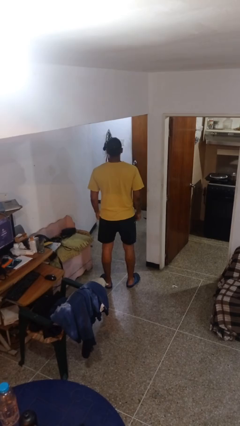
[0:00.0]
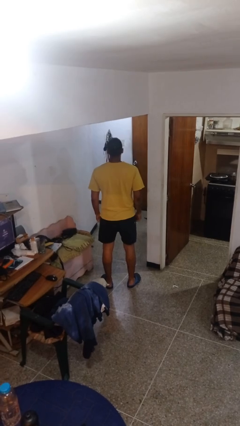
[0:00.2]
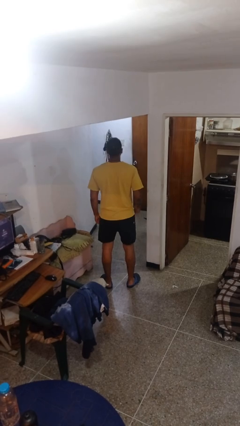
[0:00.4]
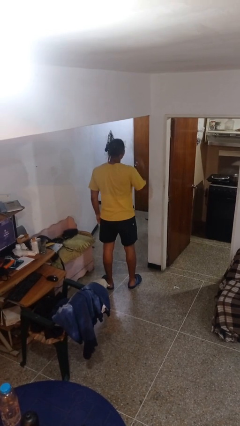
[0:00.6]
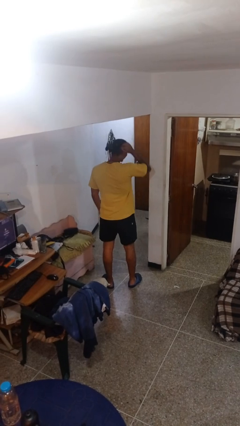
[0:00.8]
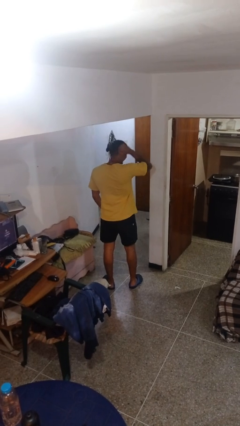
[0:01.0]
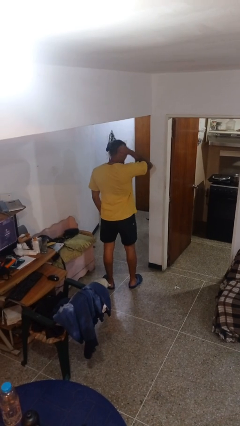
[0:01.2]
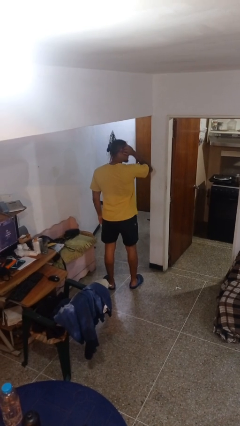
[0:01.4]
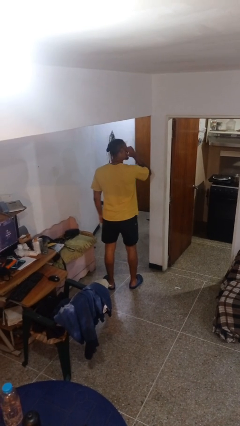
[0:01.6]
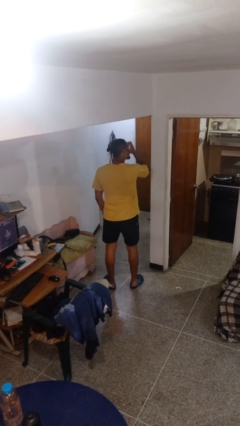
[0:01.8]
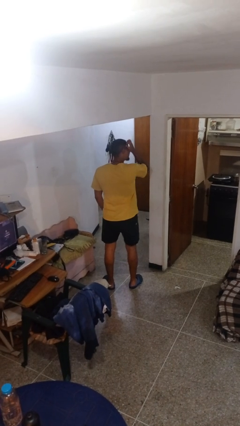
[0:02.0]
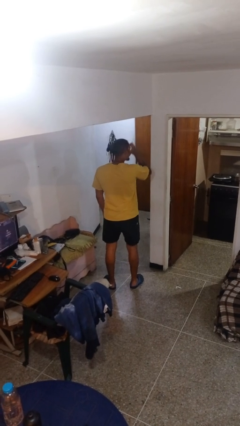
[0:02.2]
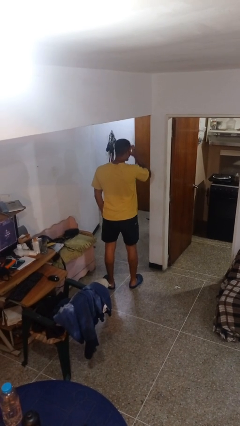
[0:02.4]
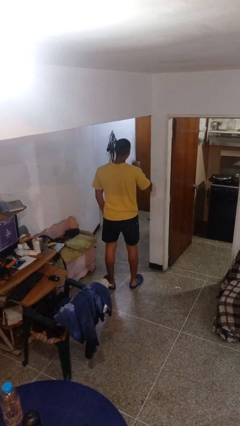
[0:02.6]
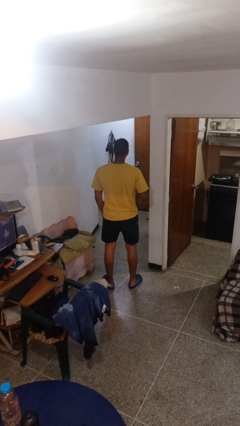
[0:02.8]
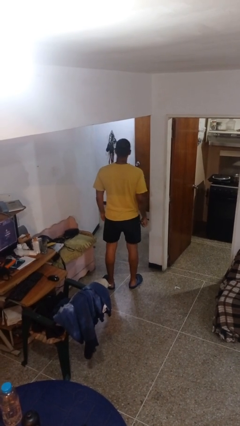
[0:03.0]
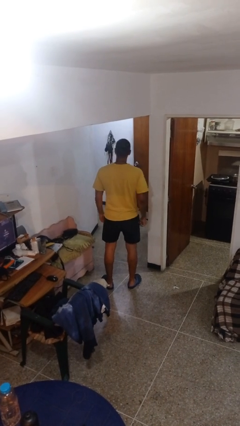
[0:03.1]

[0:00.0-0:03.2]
person scratches face

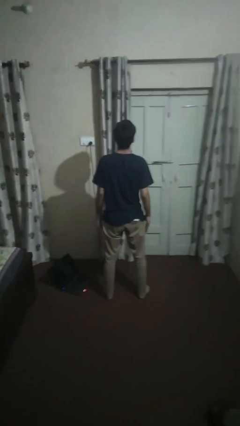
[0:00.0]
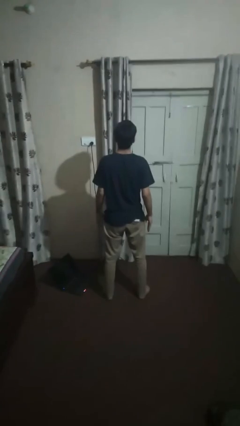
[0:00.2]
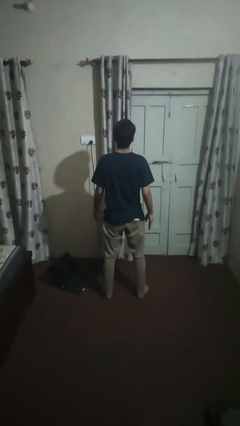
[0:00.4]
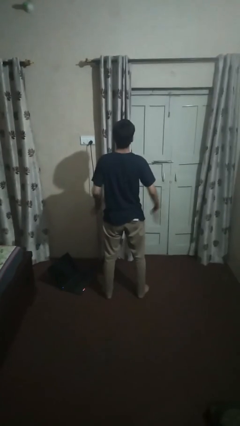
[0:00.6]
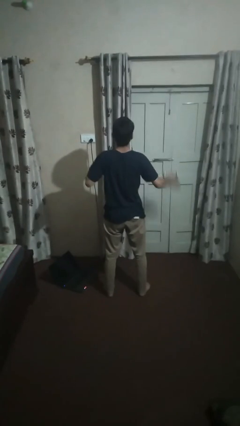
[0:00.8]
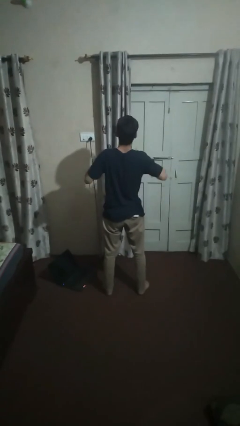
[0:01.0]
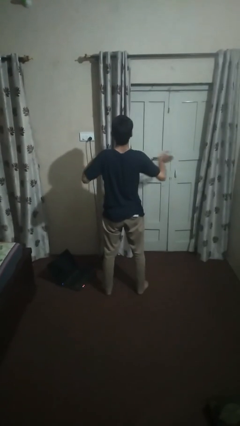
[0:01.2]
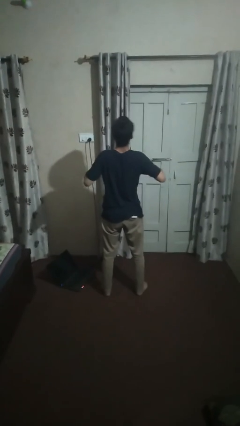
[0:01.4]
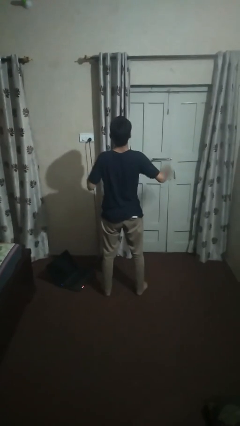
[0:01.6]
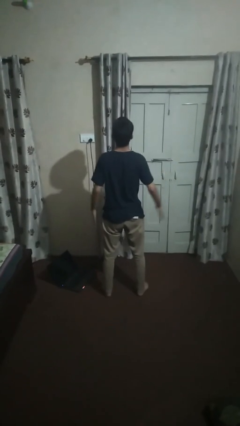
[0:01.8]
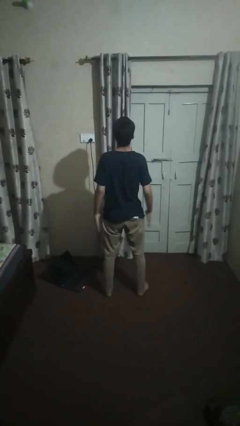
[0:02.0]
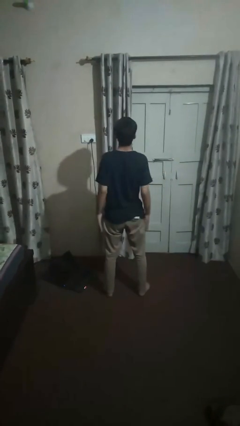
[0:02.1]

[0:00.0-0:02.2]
person drums on chest

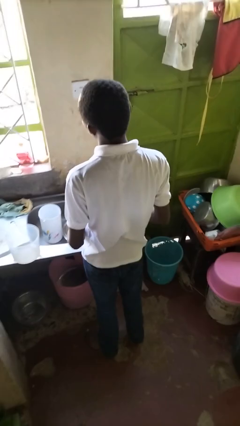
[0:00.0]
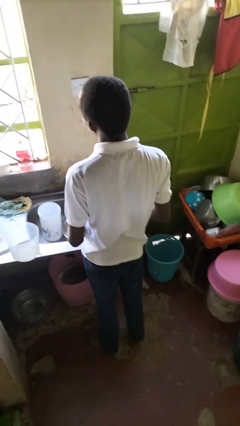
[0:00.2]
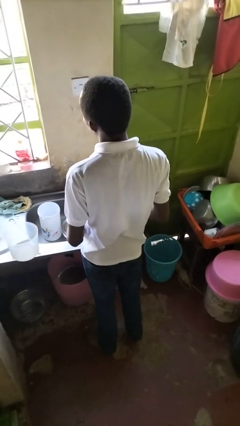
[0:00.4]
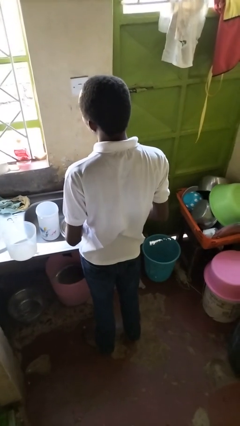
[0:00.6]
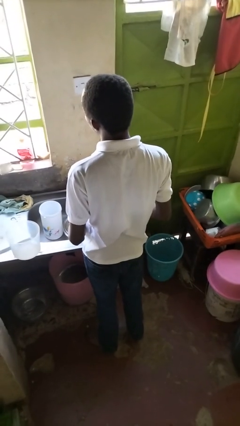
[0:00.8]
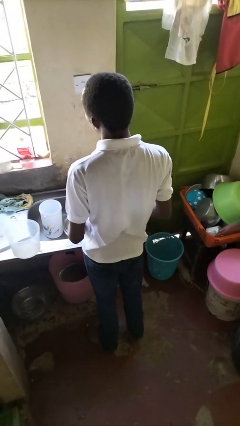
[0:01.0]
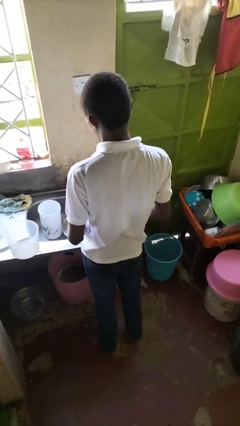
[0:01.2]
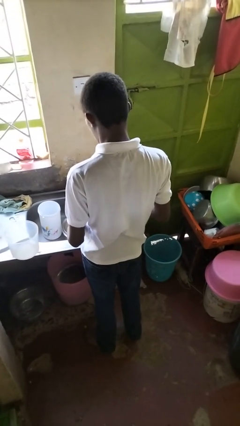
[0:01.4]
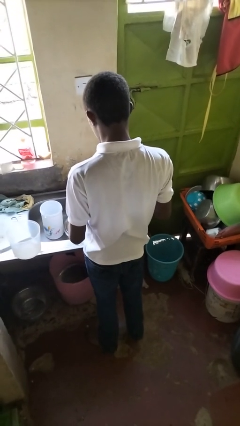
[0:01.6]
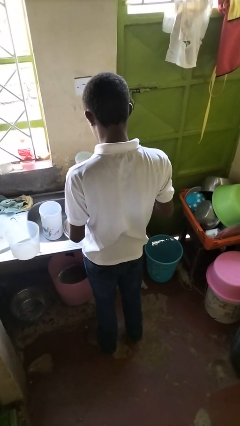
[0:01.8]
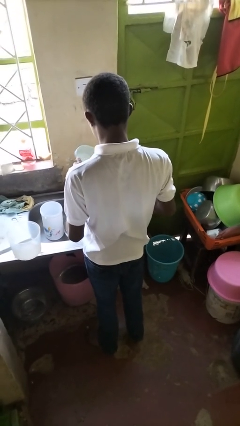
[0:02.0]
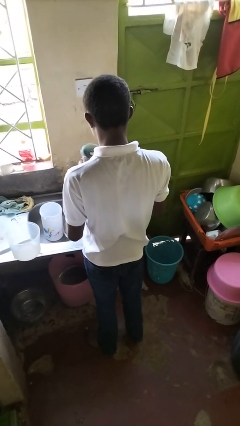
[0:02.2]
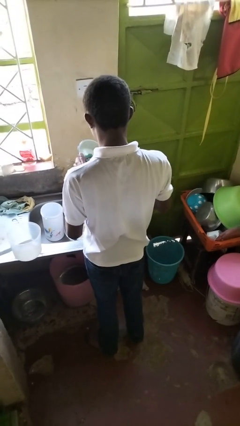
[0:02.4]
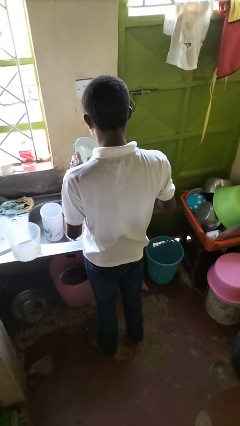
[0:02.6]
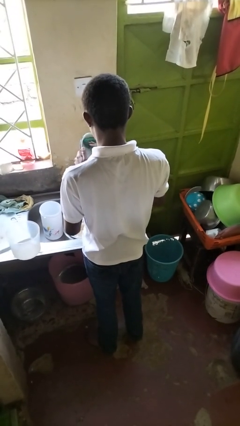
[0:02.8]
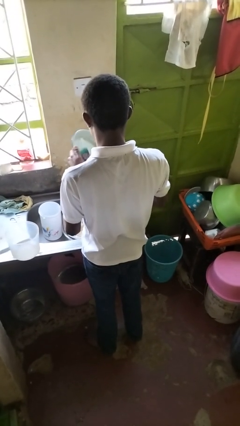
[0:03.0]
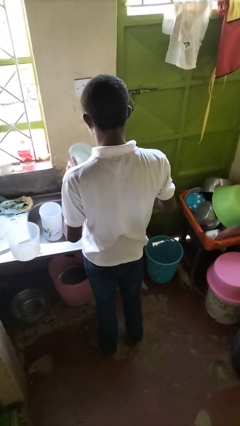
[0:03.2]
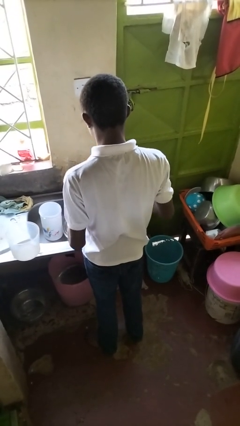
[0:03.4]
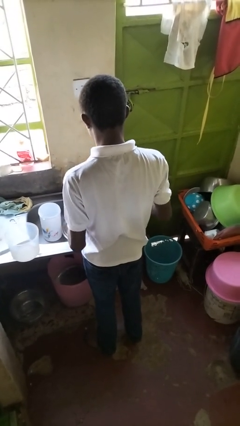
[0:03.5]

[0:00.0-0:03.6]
person washes dish

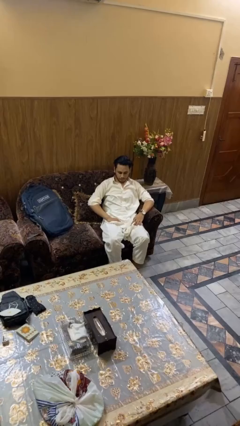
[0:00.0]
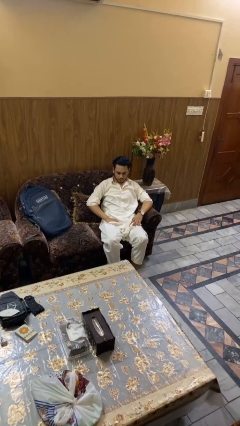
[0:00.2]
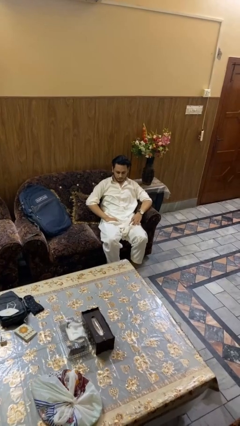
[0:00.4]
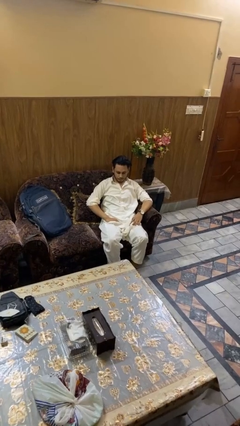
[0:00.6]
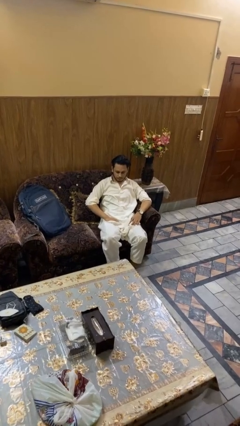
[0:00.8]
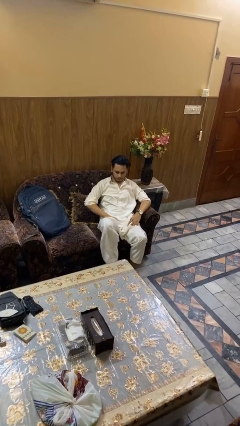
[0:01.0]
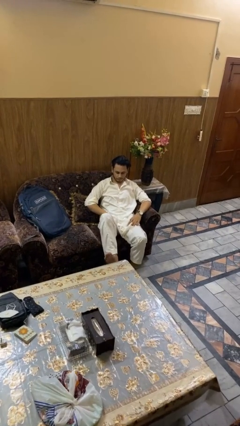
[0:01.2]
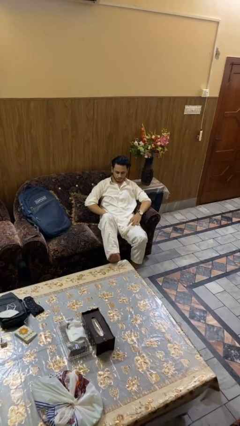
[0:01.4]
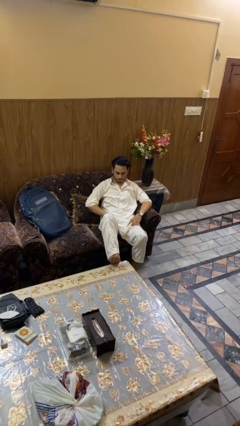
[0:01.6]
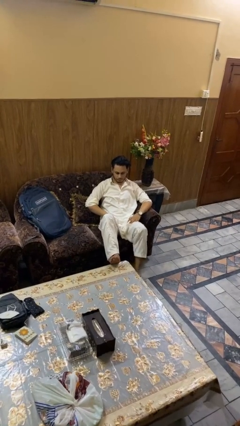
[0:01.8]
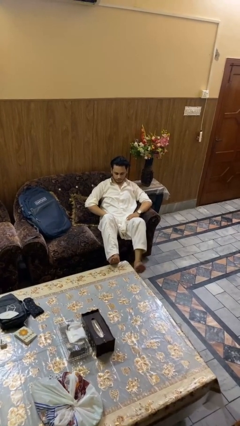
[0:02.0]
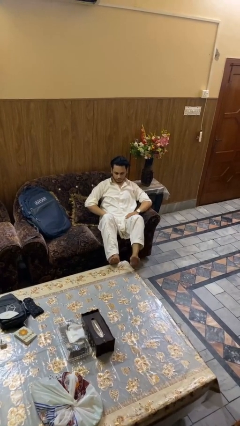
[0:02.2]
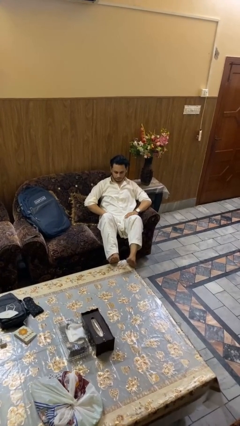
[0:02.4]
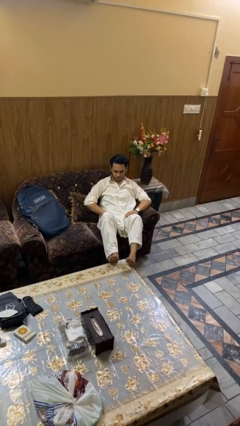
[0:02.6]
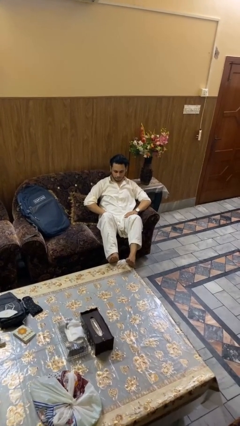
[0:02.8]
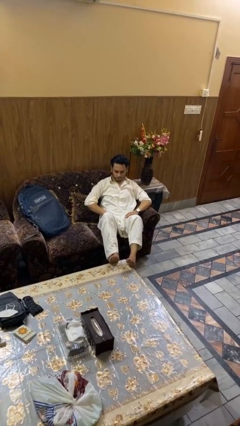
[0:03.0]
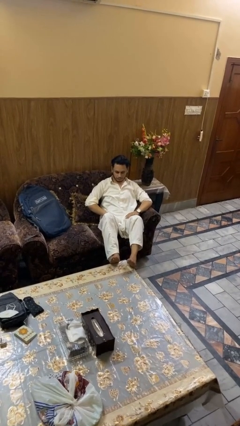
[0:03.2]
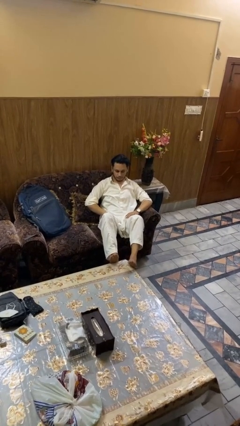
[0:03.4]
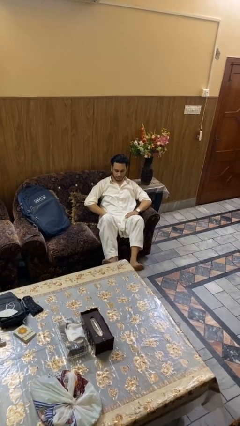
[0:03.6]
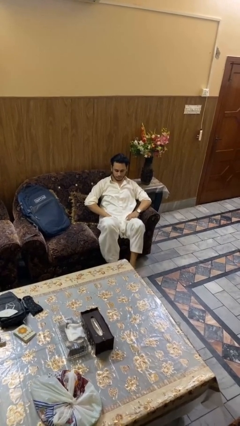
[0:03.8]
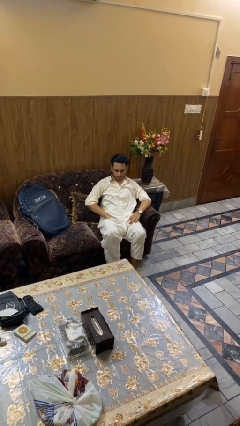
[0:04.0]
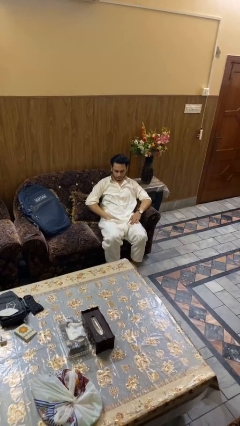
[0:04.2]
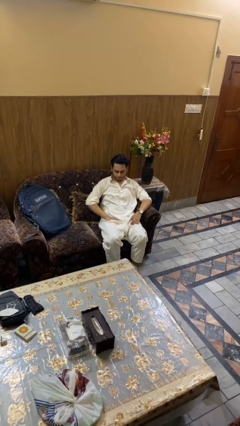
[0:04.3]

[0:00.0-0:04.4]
person puts feet up

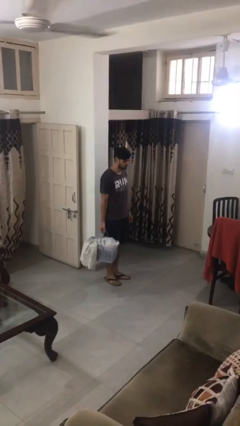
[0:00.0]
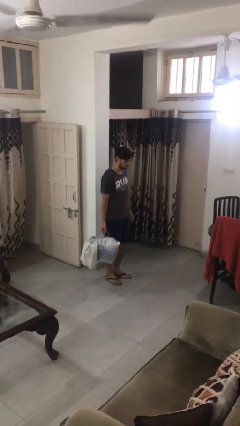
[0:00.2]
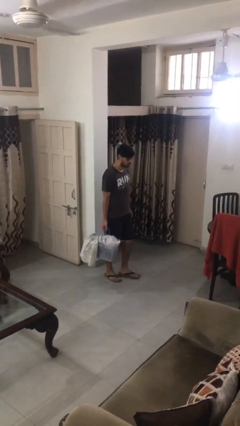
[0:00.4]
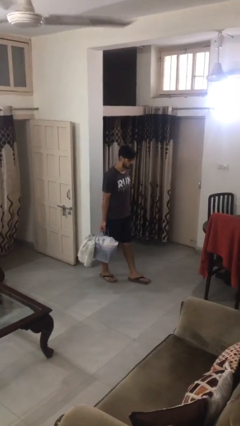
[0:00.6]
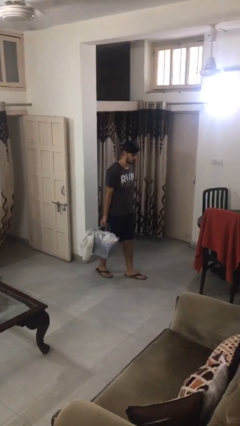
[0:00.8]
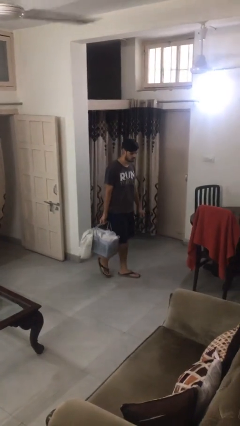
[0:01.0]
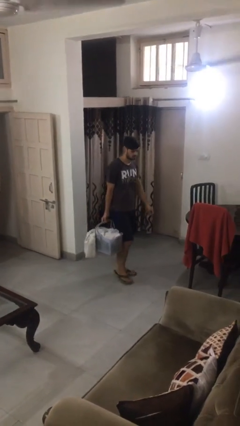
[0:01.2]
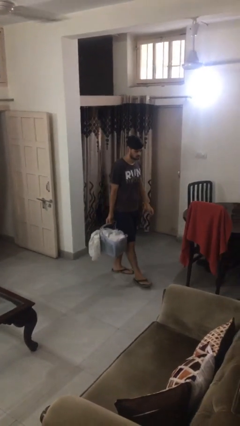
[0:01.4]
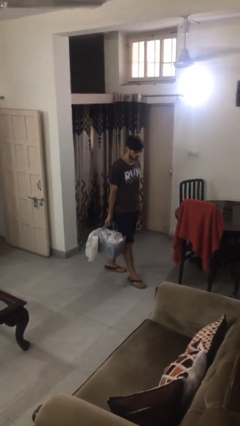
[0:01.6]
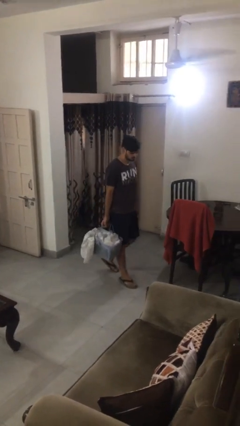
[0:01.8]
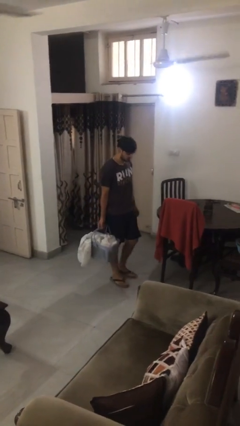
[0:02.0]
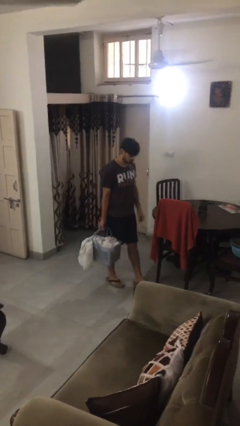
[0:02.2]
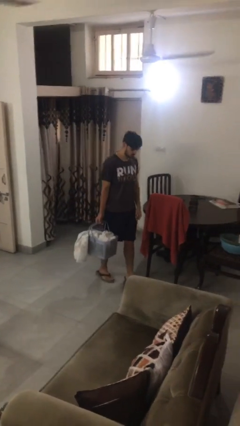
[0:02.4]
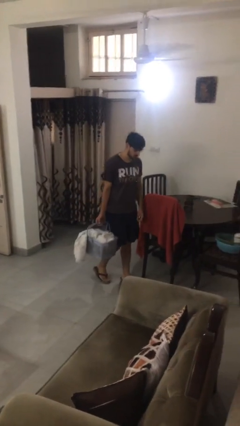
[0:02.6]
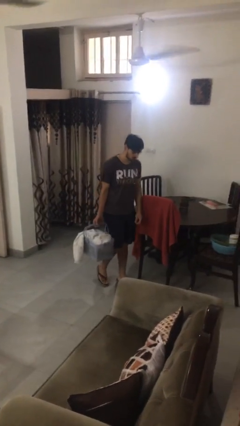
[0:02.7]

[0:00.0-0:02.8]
person carries laundry basket

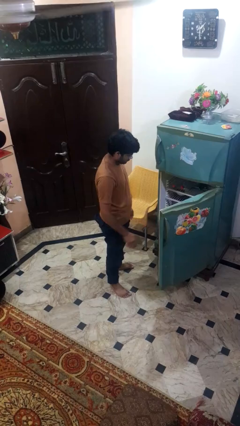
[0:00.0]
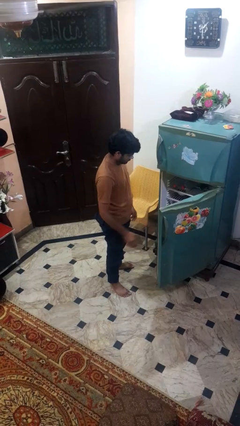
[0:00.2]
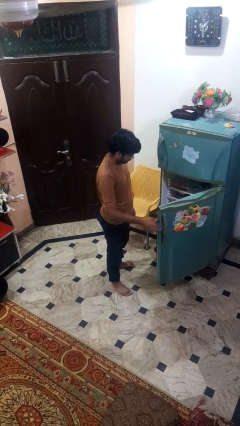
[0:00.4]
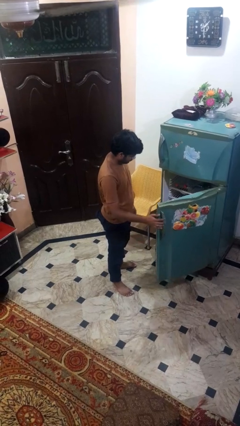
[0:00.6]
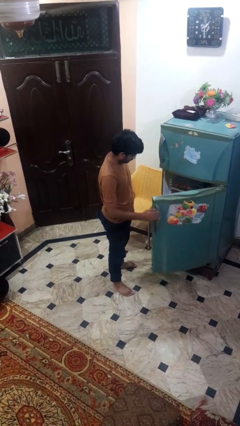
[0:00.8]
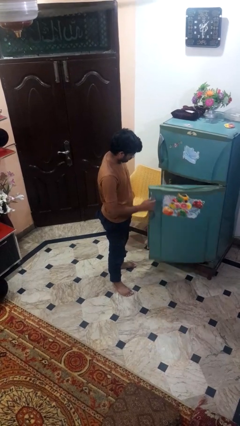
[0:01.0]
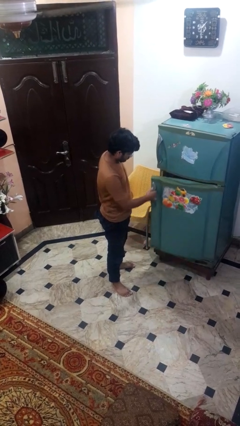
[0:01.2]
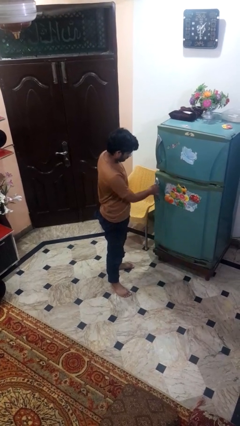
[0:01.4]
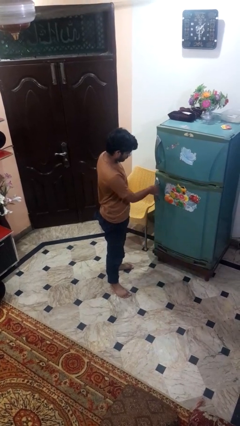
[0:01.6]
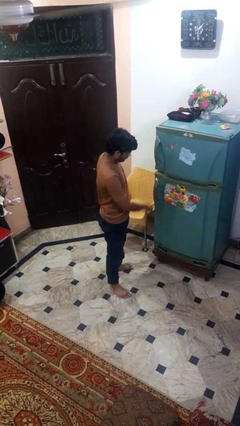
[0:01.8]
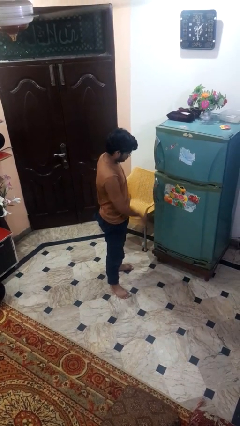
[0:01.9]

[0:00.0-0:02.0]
person closes refrigerator
